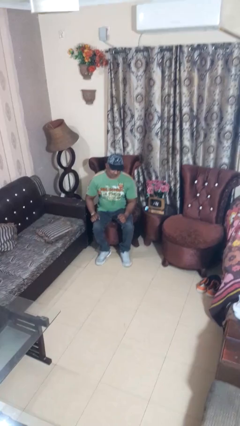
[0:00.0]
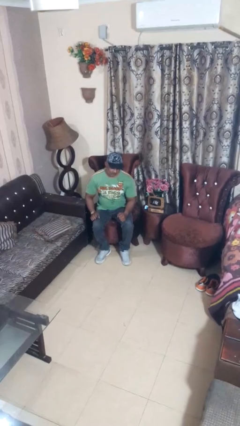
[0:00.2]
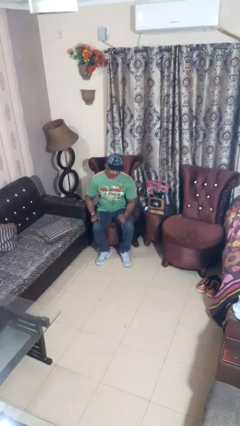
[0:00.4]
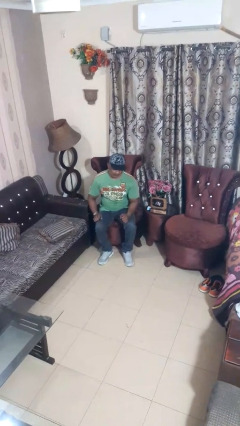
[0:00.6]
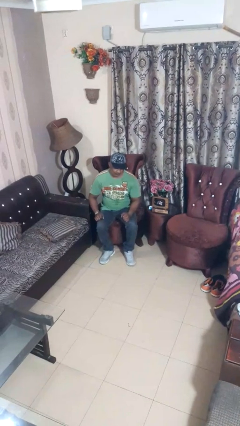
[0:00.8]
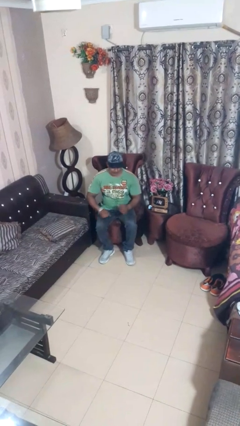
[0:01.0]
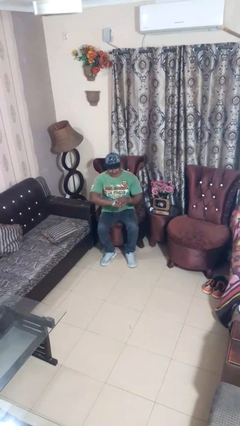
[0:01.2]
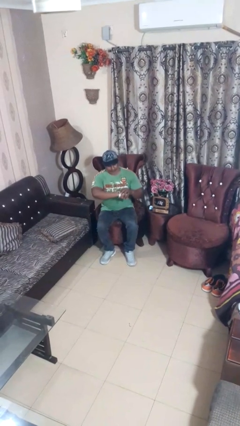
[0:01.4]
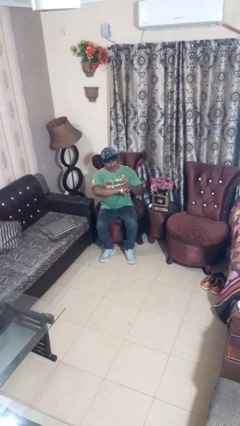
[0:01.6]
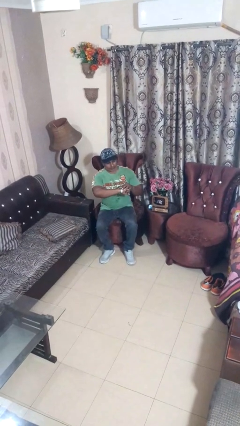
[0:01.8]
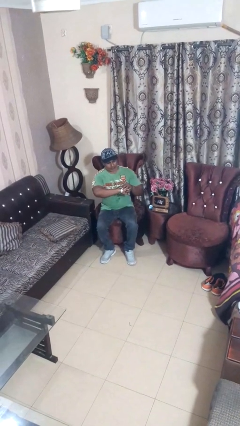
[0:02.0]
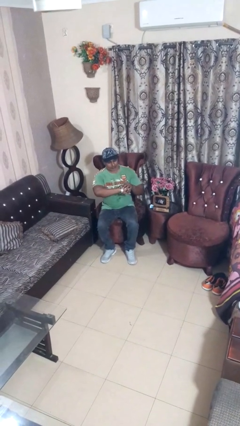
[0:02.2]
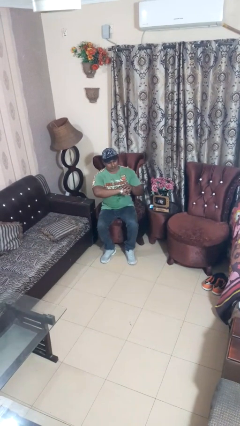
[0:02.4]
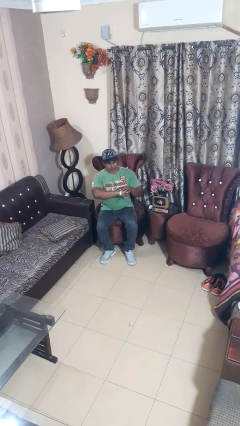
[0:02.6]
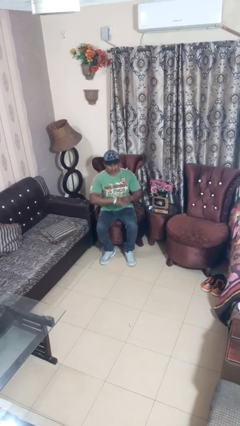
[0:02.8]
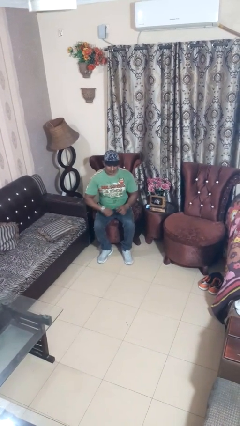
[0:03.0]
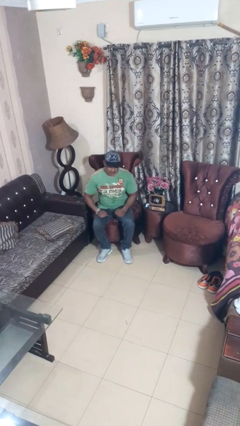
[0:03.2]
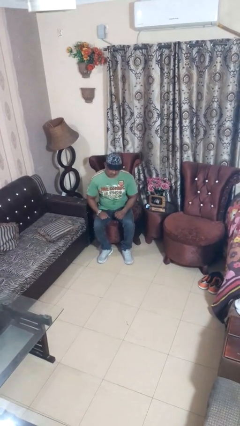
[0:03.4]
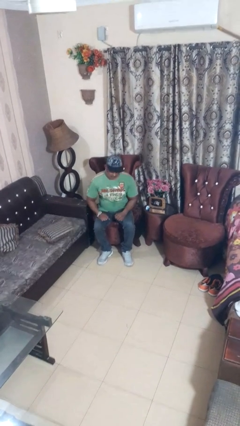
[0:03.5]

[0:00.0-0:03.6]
person looks at wristwatch

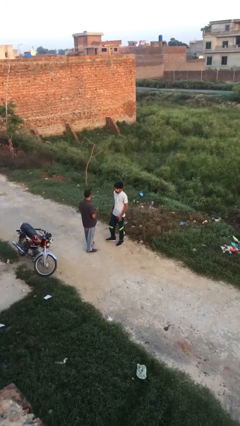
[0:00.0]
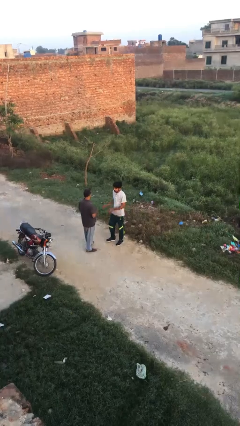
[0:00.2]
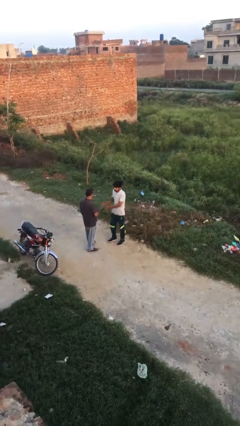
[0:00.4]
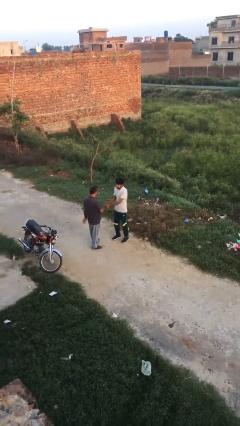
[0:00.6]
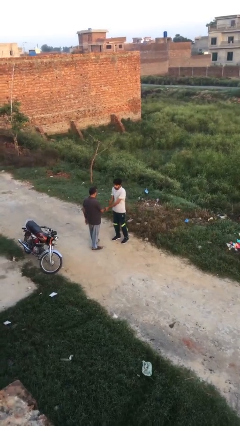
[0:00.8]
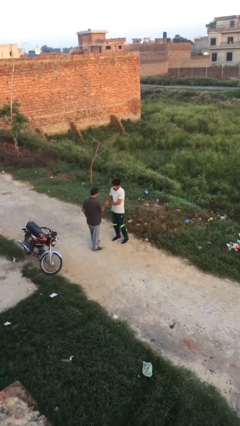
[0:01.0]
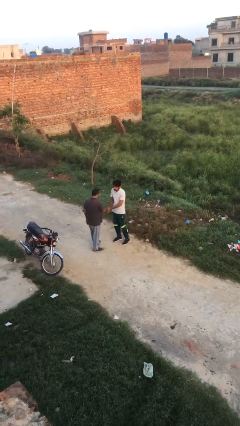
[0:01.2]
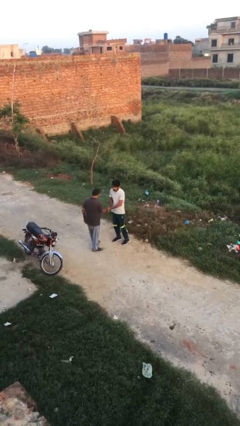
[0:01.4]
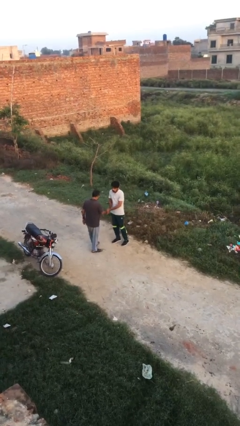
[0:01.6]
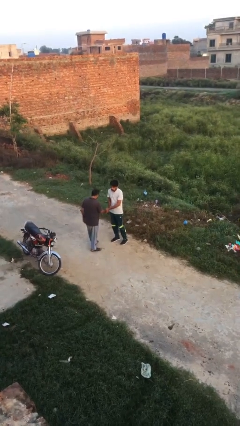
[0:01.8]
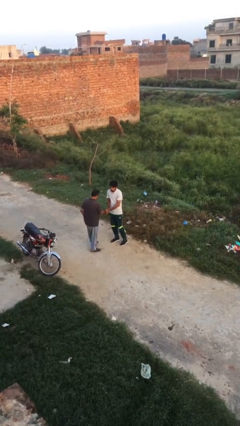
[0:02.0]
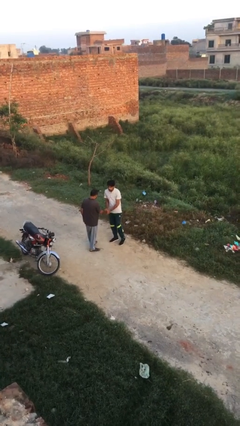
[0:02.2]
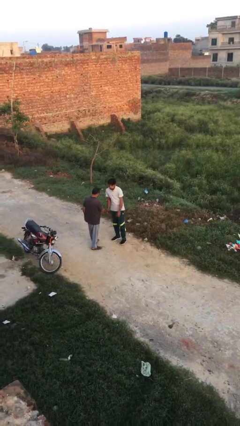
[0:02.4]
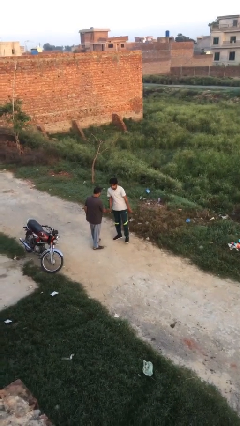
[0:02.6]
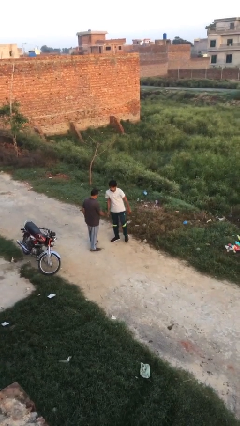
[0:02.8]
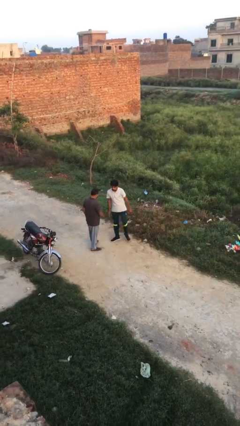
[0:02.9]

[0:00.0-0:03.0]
person shakes hand

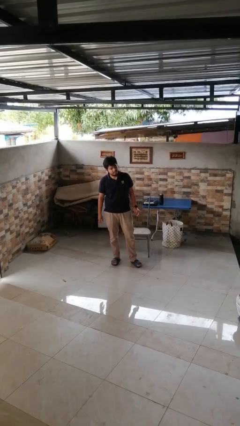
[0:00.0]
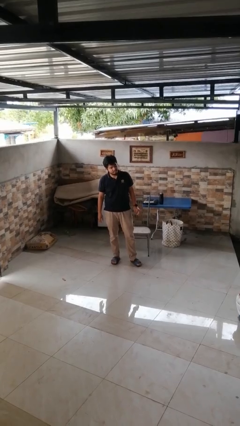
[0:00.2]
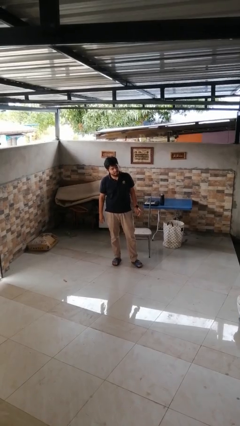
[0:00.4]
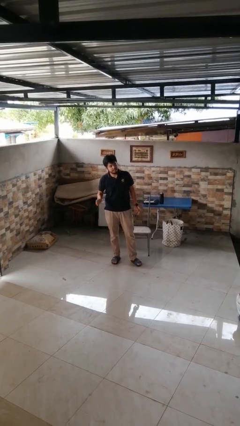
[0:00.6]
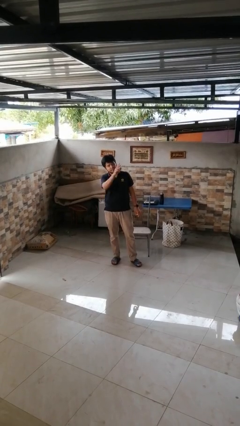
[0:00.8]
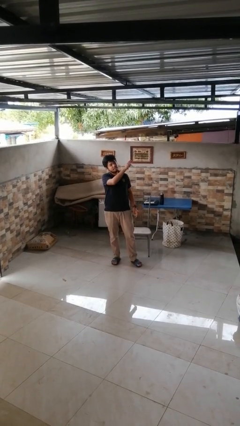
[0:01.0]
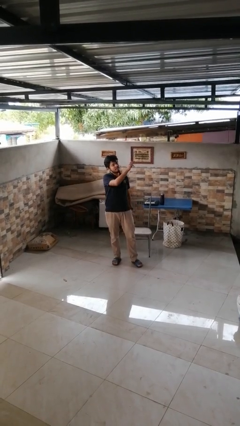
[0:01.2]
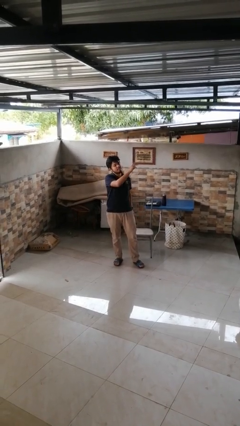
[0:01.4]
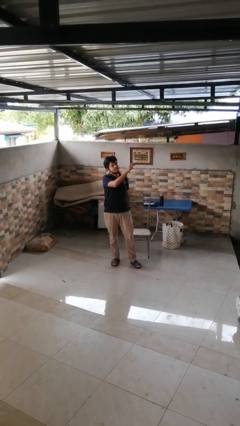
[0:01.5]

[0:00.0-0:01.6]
person gestures swipe left

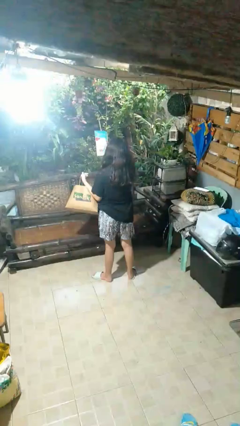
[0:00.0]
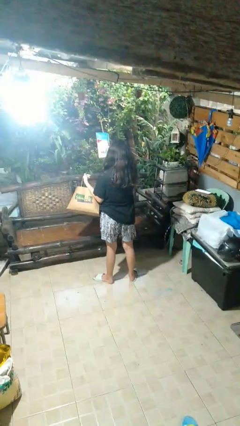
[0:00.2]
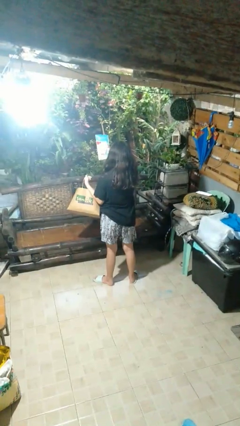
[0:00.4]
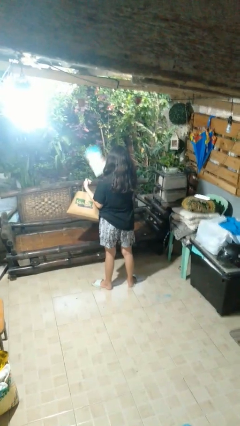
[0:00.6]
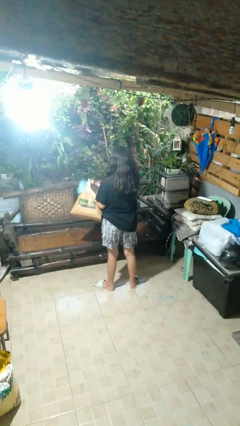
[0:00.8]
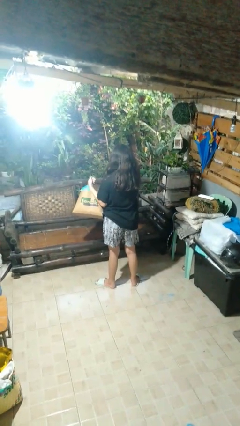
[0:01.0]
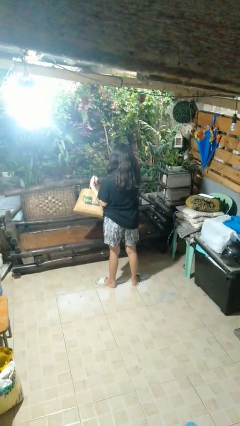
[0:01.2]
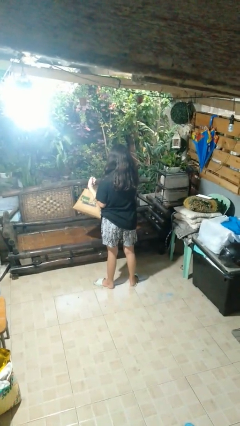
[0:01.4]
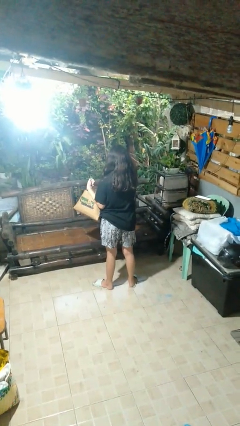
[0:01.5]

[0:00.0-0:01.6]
person puts object into bag

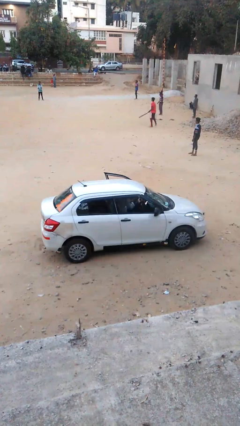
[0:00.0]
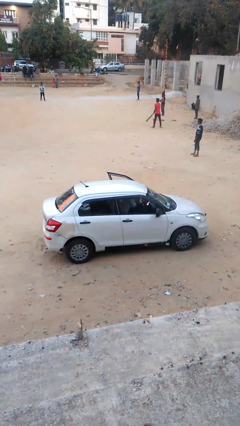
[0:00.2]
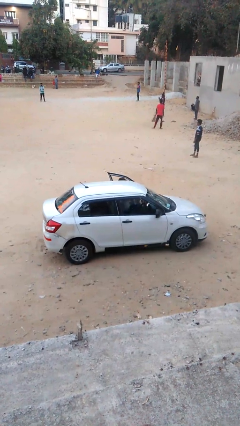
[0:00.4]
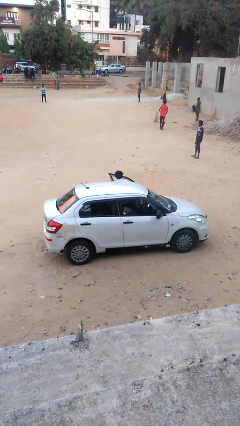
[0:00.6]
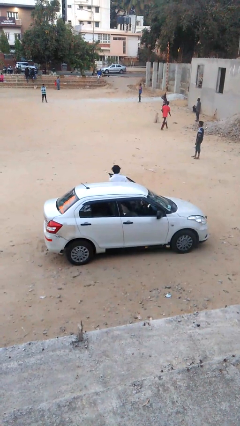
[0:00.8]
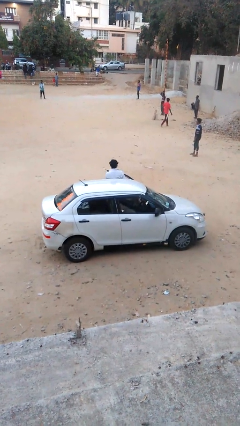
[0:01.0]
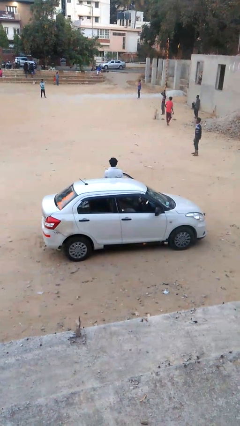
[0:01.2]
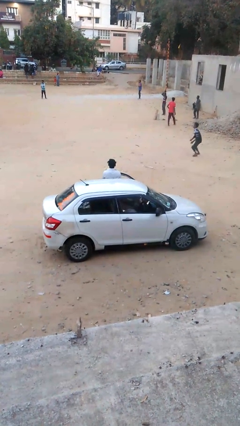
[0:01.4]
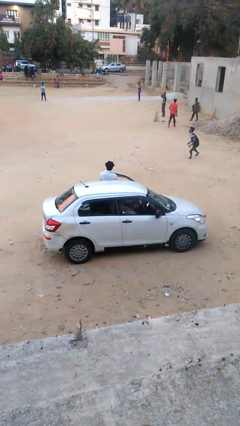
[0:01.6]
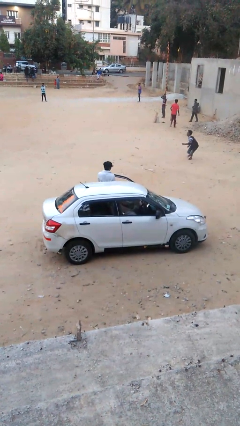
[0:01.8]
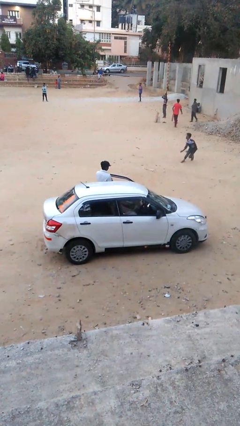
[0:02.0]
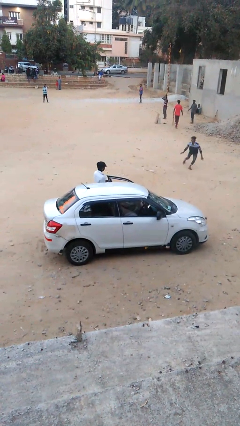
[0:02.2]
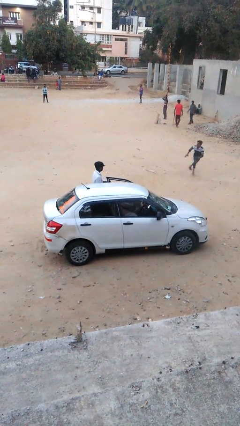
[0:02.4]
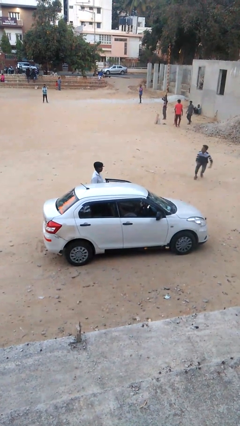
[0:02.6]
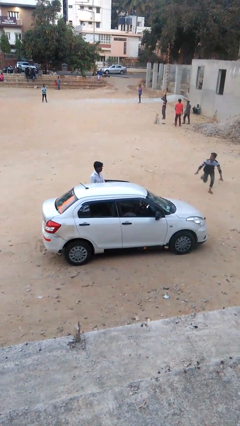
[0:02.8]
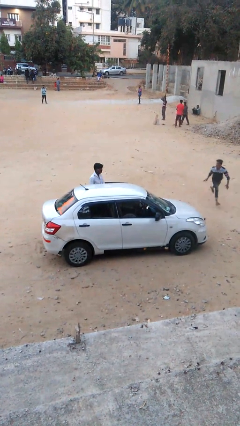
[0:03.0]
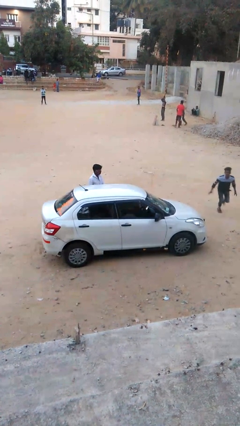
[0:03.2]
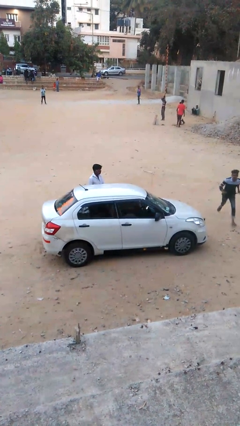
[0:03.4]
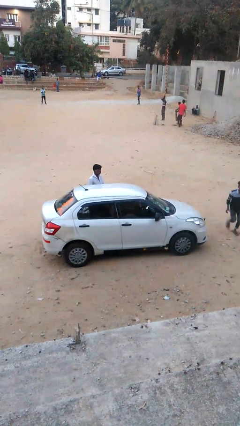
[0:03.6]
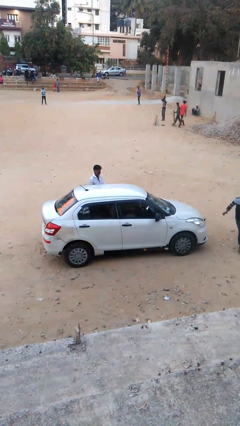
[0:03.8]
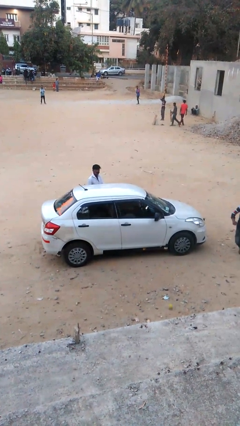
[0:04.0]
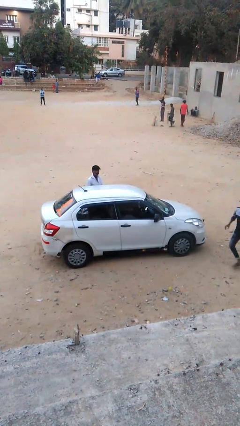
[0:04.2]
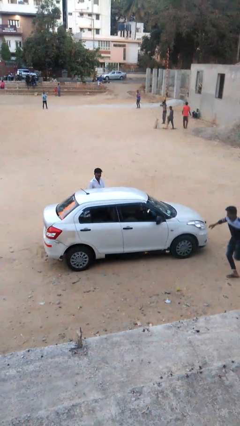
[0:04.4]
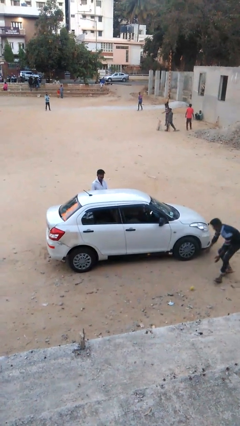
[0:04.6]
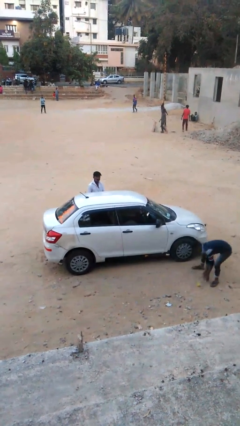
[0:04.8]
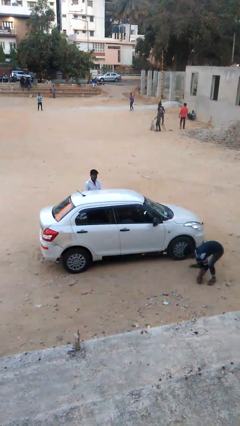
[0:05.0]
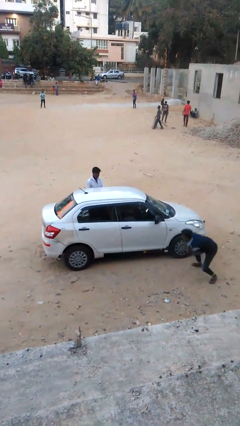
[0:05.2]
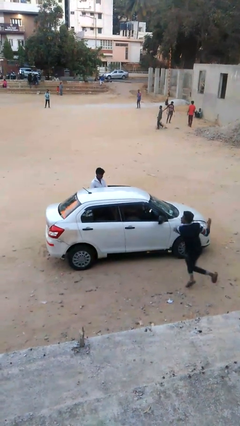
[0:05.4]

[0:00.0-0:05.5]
car drops off person

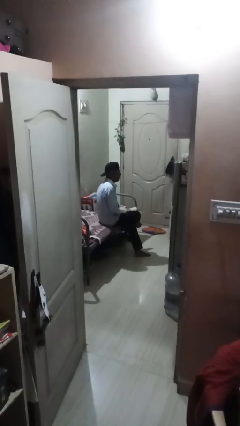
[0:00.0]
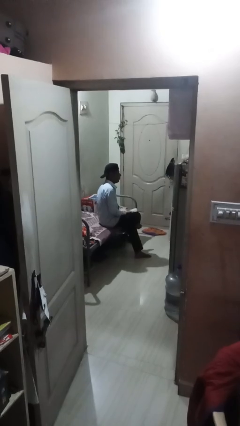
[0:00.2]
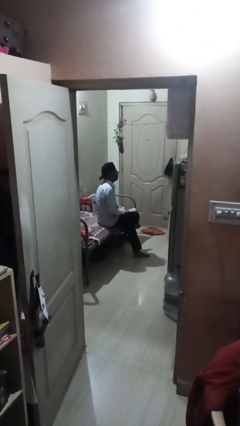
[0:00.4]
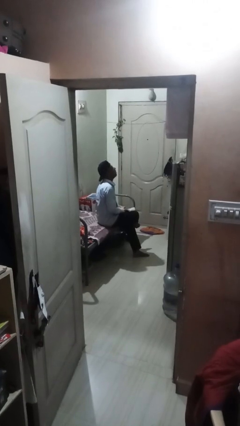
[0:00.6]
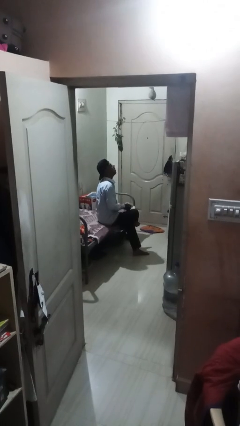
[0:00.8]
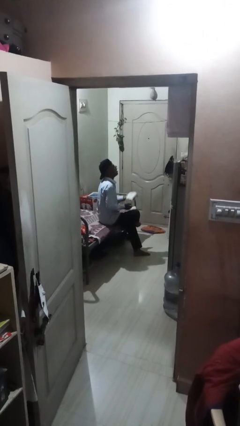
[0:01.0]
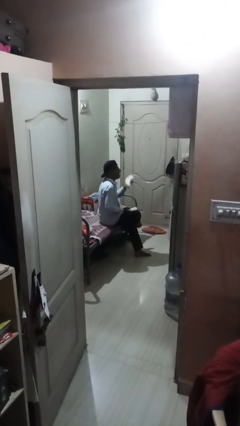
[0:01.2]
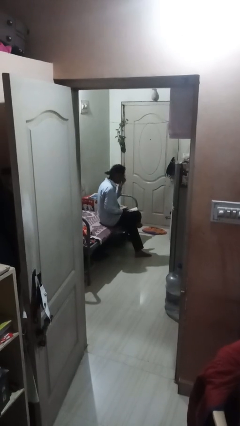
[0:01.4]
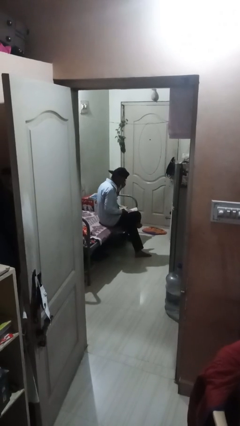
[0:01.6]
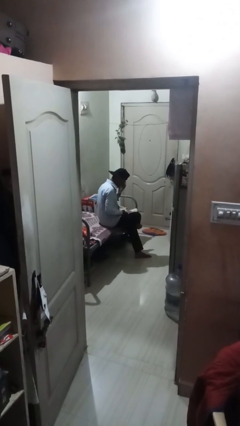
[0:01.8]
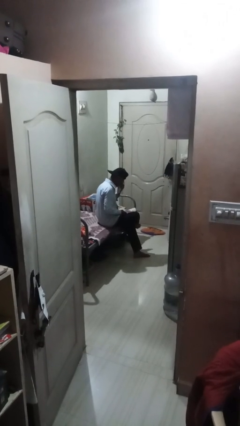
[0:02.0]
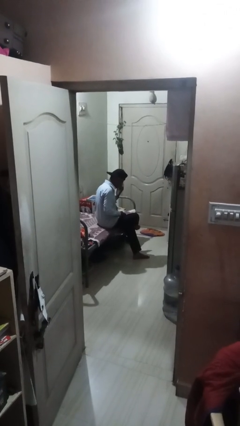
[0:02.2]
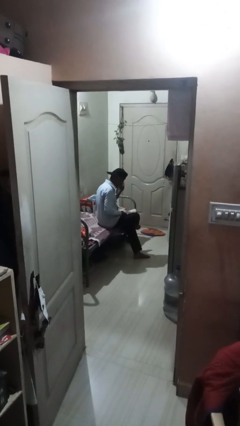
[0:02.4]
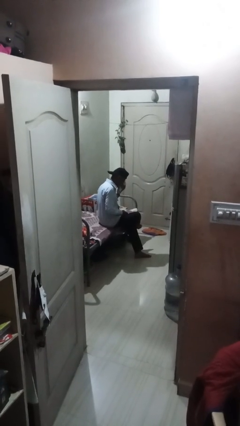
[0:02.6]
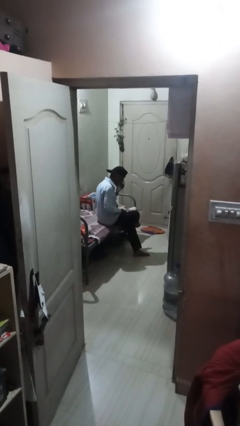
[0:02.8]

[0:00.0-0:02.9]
person blows nose
